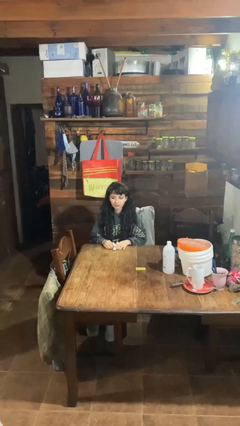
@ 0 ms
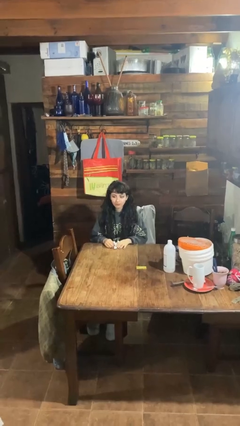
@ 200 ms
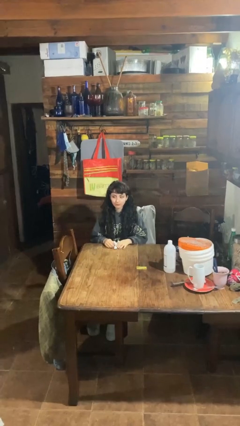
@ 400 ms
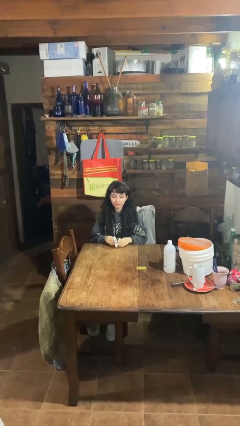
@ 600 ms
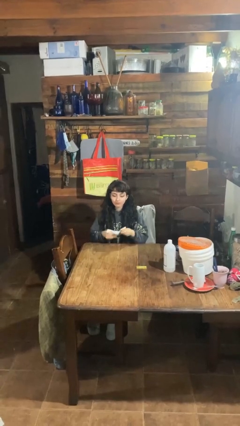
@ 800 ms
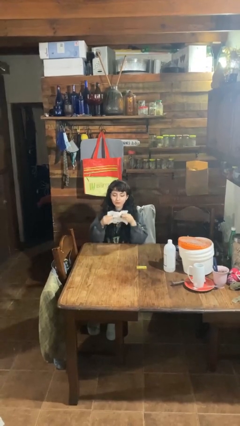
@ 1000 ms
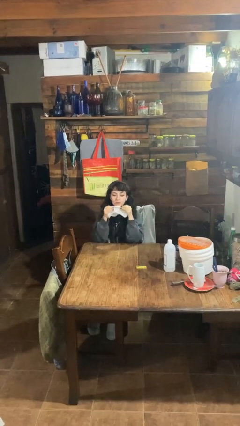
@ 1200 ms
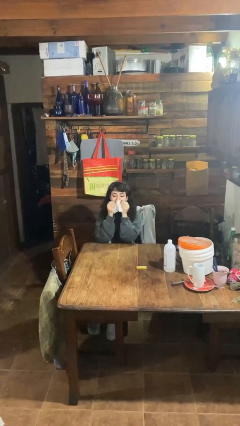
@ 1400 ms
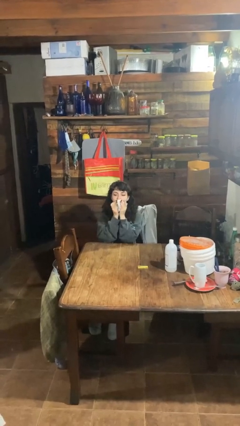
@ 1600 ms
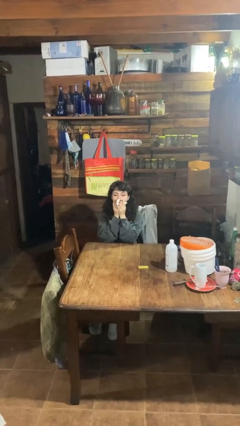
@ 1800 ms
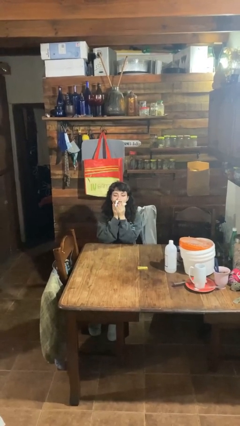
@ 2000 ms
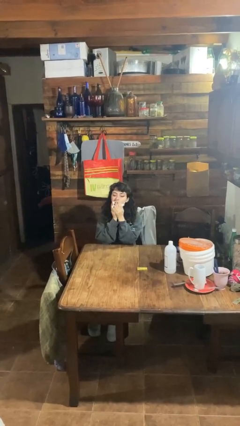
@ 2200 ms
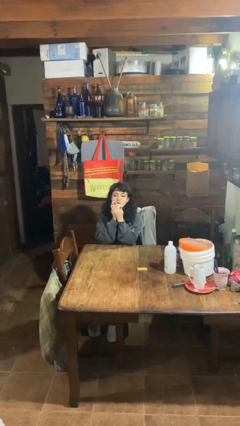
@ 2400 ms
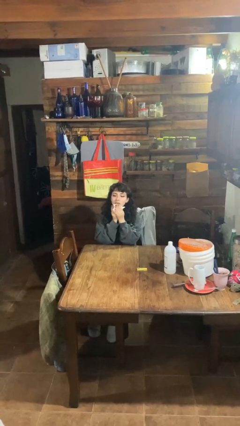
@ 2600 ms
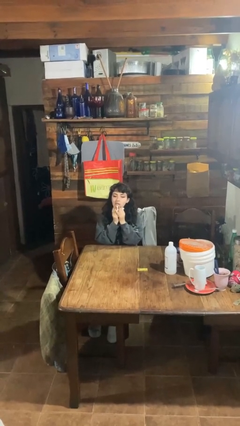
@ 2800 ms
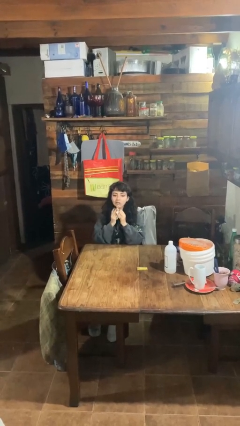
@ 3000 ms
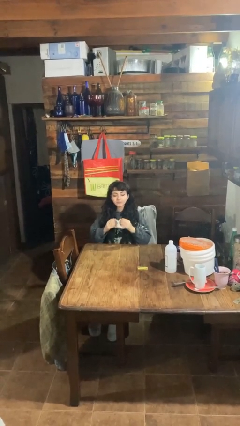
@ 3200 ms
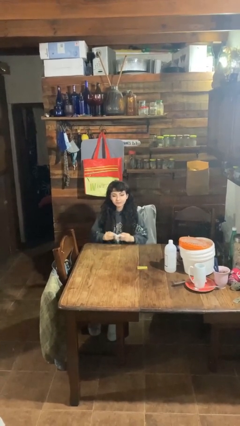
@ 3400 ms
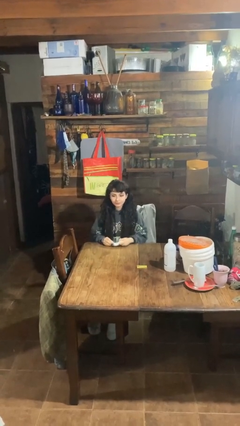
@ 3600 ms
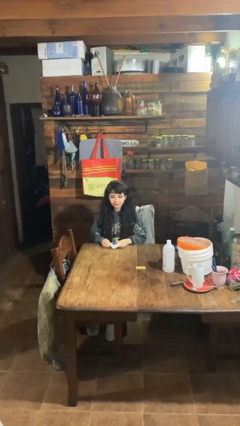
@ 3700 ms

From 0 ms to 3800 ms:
person wipes mouth with napkin

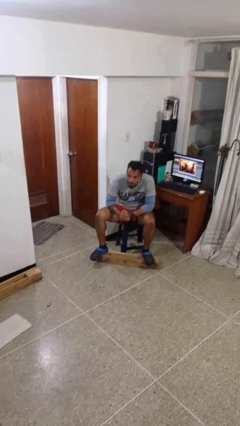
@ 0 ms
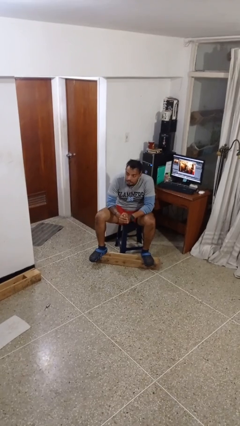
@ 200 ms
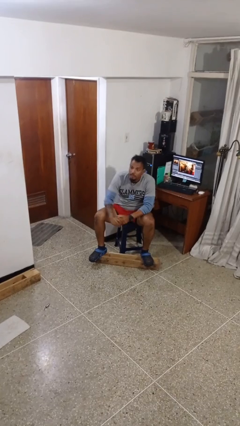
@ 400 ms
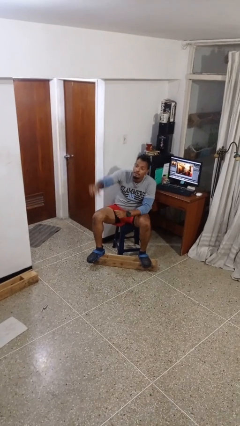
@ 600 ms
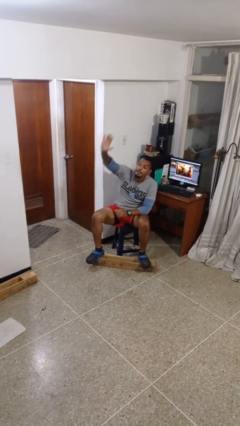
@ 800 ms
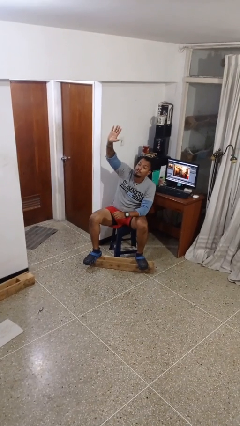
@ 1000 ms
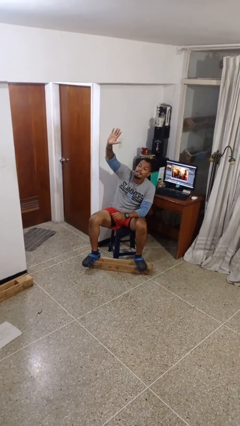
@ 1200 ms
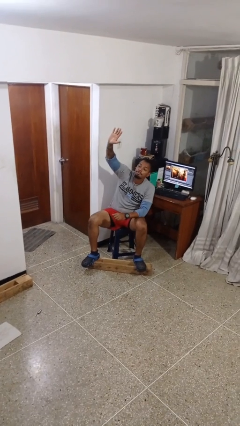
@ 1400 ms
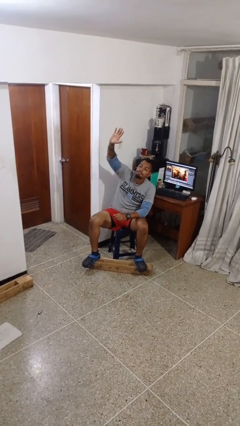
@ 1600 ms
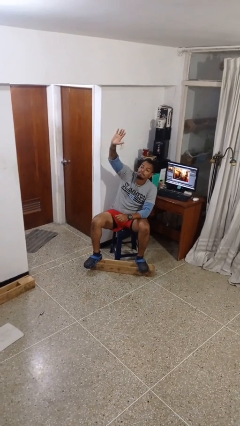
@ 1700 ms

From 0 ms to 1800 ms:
person gestures raise hand

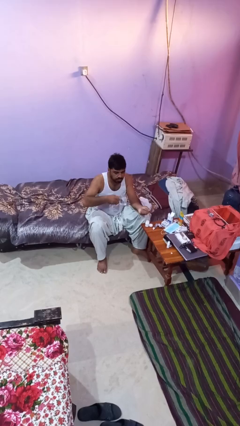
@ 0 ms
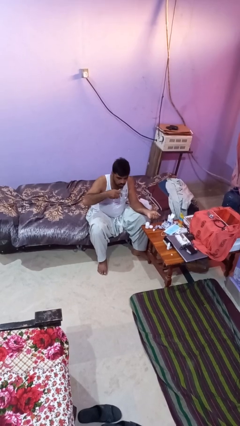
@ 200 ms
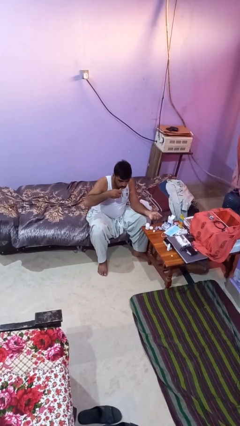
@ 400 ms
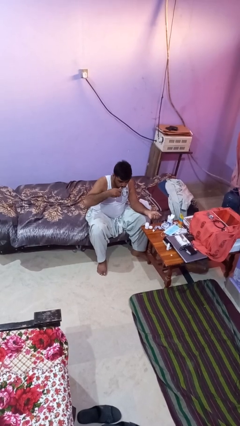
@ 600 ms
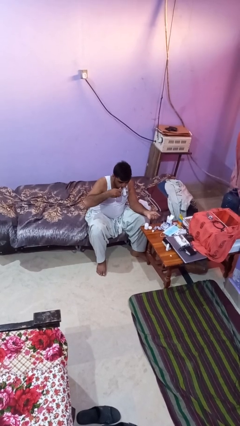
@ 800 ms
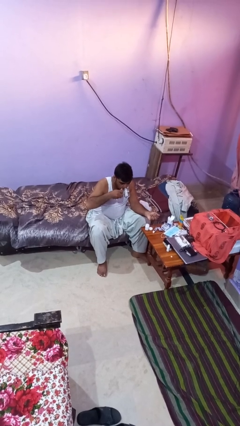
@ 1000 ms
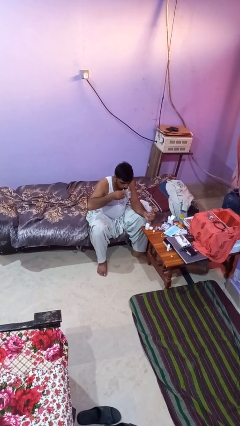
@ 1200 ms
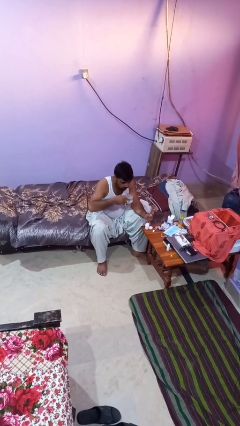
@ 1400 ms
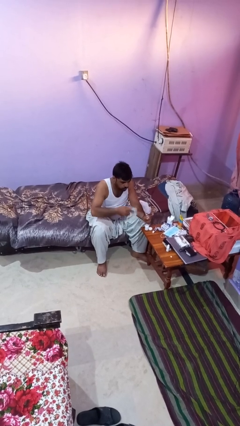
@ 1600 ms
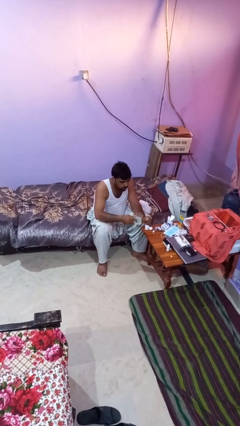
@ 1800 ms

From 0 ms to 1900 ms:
person drinks from cup

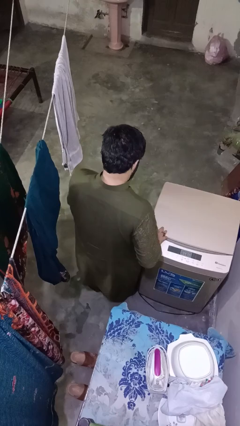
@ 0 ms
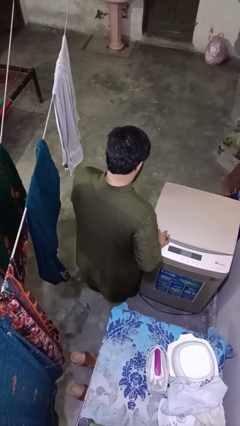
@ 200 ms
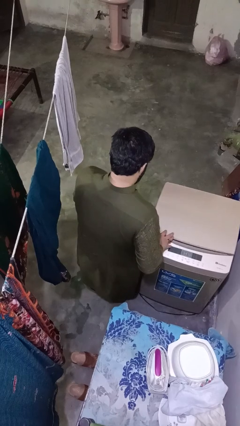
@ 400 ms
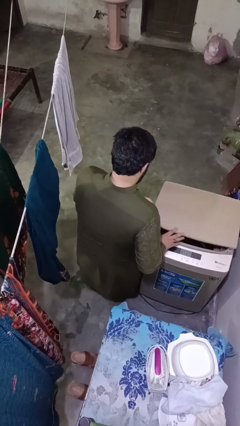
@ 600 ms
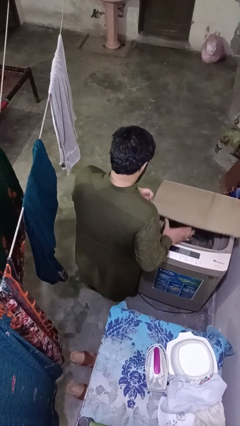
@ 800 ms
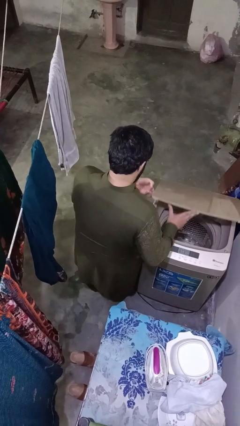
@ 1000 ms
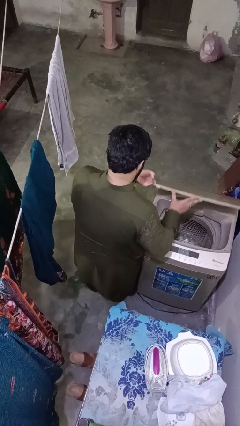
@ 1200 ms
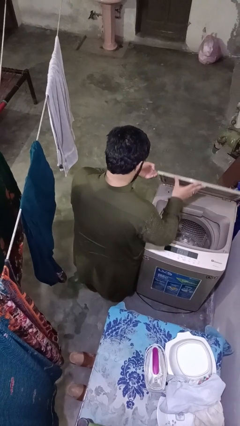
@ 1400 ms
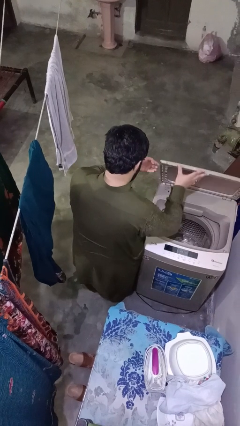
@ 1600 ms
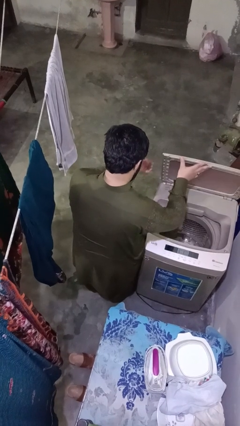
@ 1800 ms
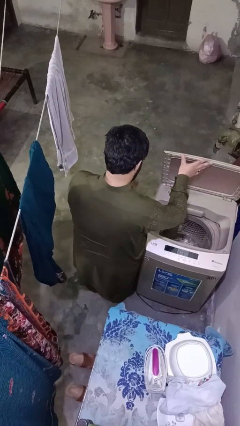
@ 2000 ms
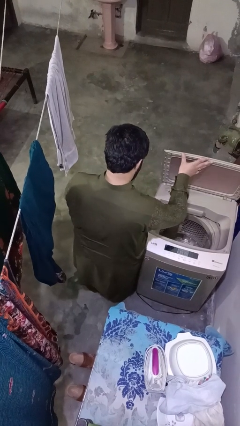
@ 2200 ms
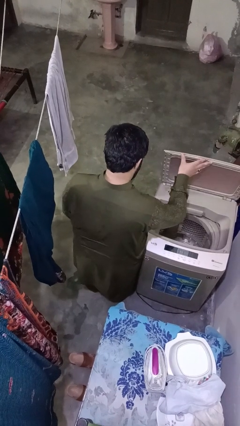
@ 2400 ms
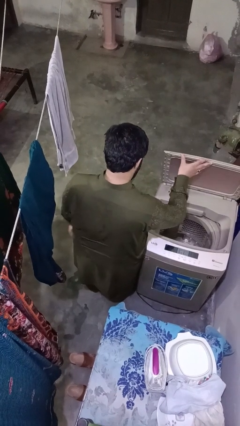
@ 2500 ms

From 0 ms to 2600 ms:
person opens clothes washer

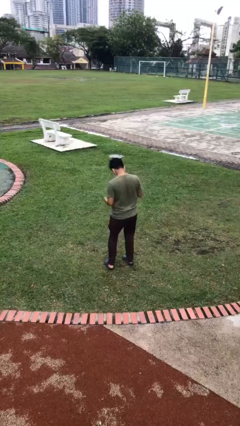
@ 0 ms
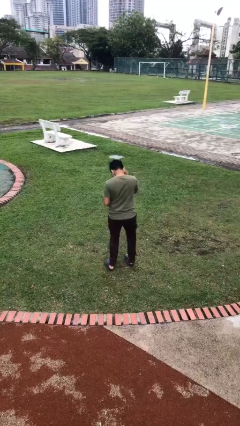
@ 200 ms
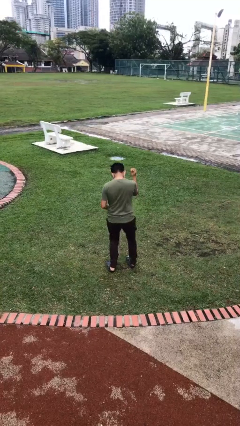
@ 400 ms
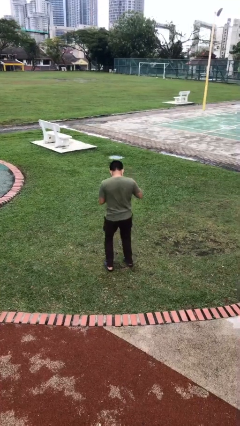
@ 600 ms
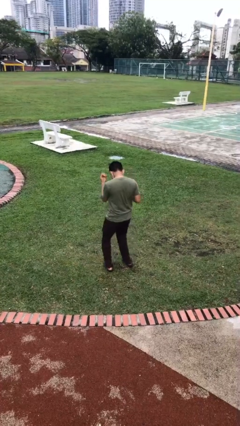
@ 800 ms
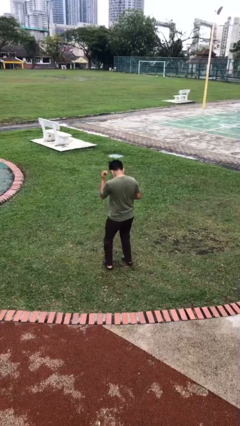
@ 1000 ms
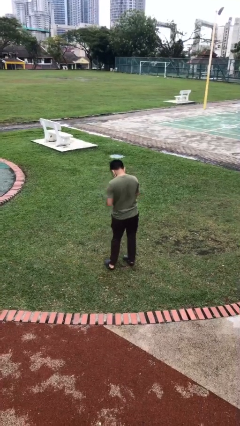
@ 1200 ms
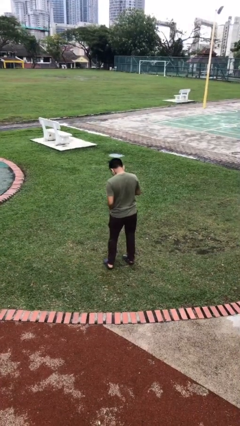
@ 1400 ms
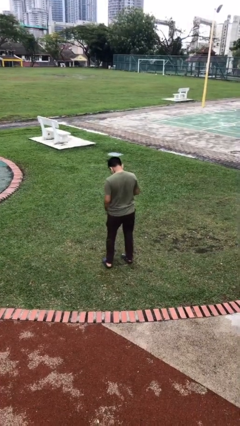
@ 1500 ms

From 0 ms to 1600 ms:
person dances in place

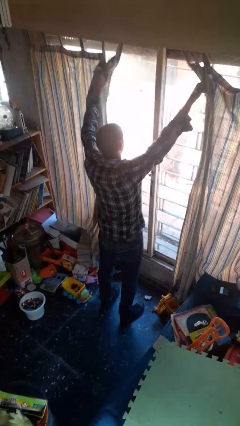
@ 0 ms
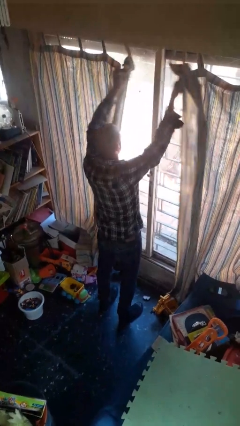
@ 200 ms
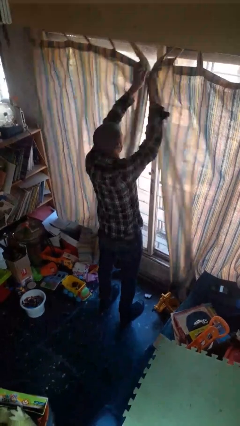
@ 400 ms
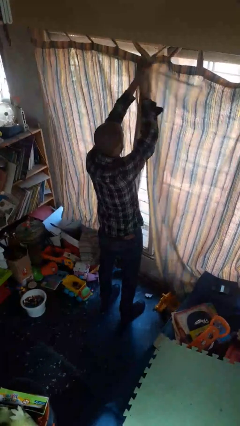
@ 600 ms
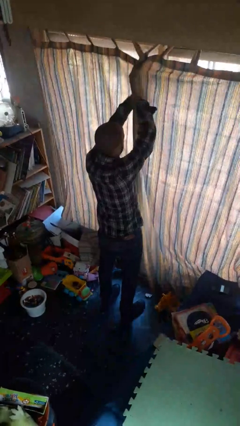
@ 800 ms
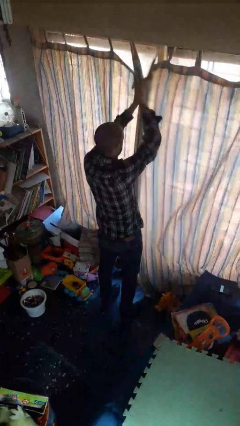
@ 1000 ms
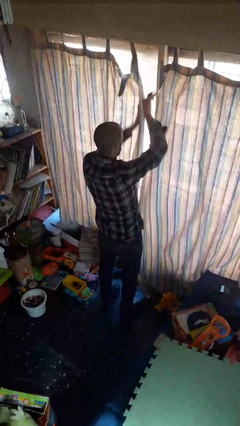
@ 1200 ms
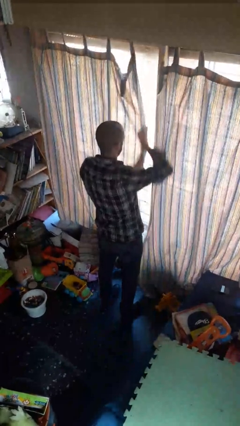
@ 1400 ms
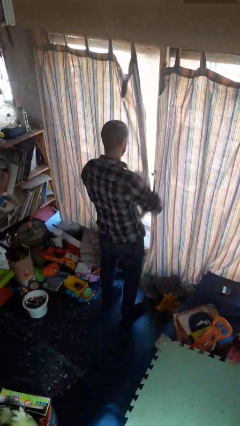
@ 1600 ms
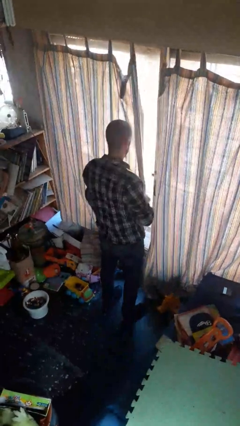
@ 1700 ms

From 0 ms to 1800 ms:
person closes curtains

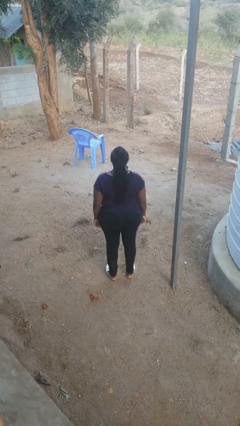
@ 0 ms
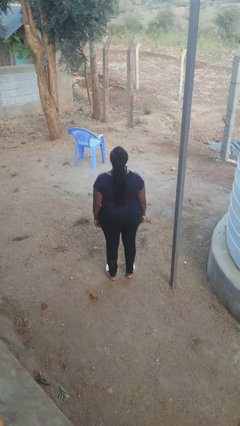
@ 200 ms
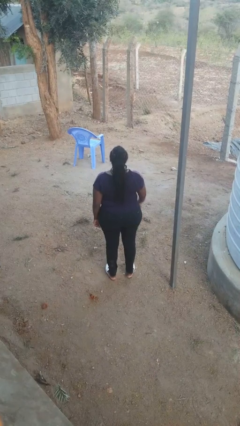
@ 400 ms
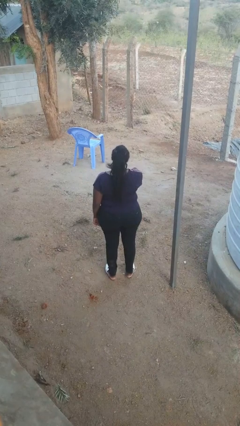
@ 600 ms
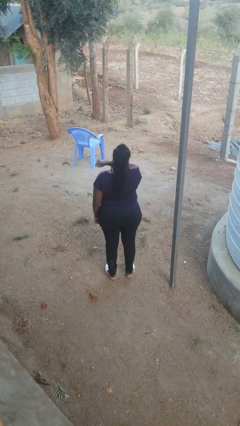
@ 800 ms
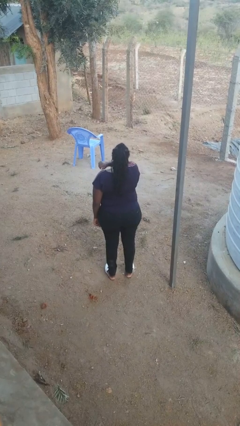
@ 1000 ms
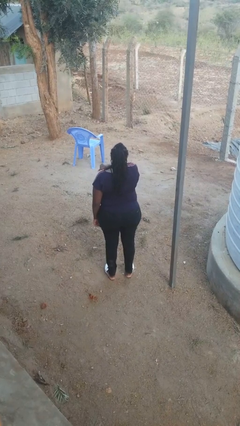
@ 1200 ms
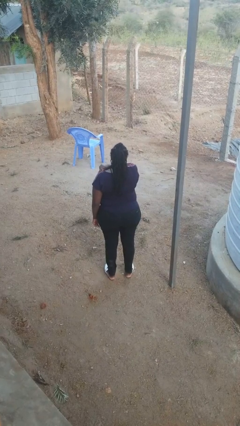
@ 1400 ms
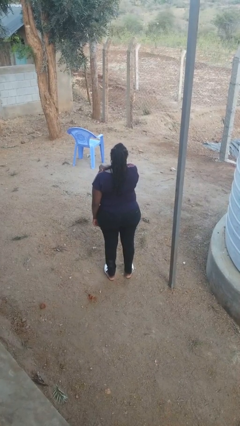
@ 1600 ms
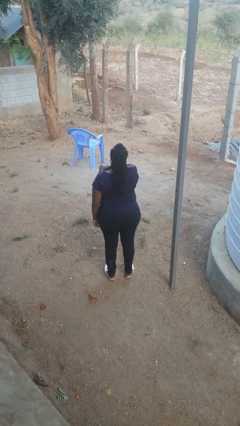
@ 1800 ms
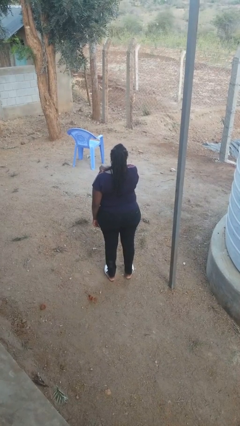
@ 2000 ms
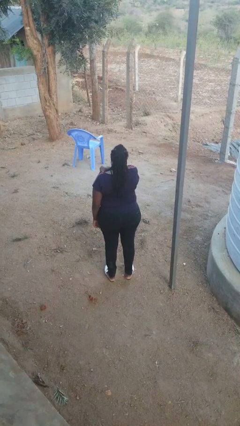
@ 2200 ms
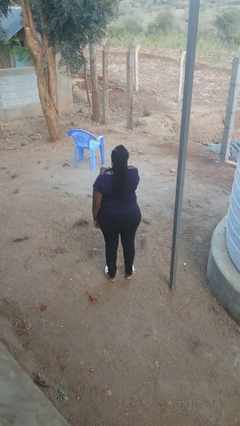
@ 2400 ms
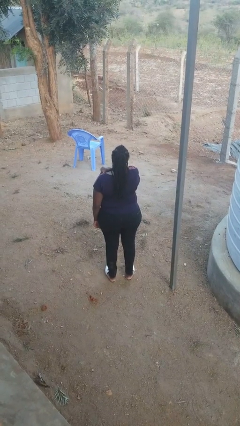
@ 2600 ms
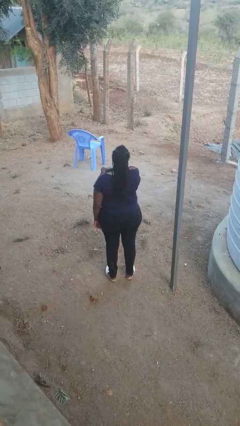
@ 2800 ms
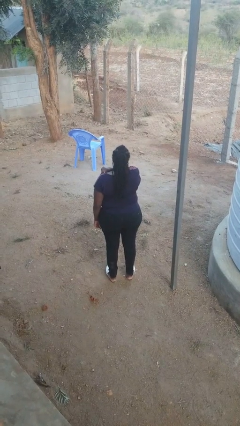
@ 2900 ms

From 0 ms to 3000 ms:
person sneezes into arm

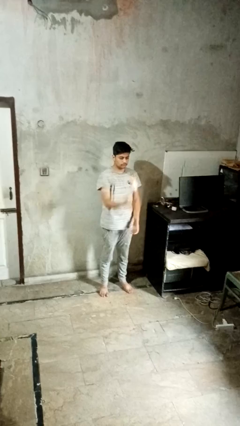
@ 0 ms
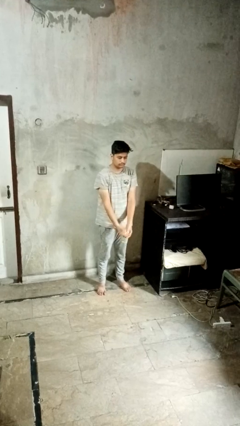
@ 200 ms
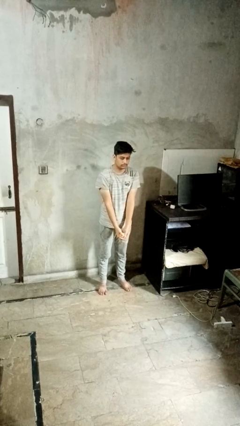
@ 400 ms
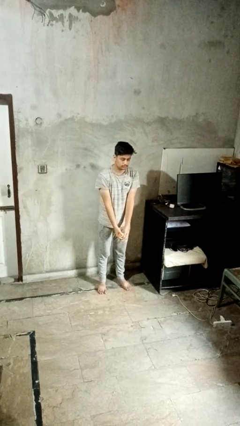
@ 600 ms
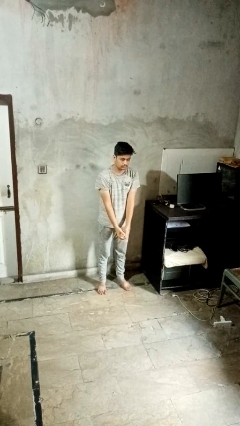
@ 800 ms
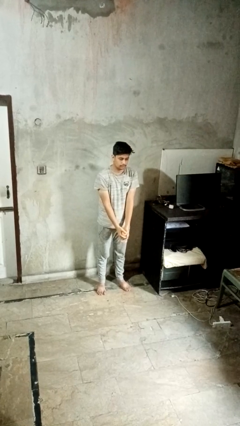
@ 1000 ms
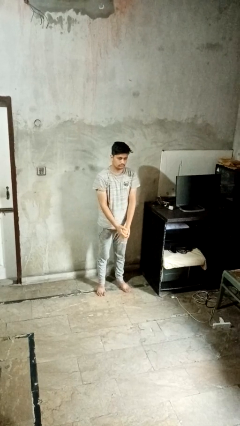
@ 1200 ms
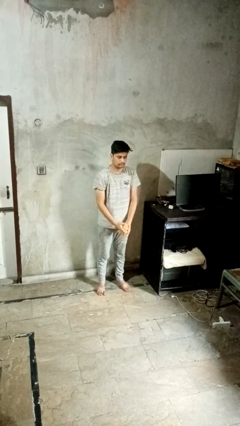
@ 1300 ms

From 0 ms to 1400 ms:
person catches dropped object
